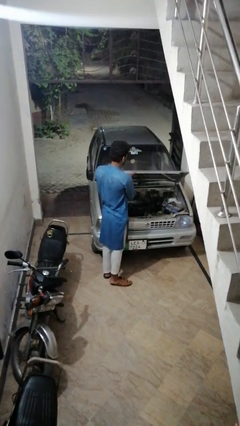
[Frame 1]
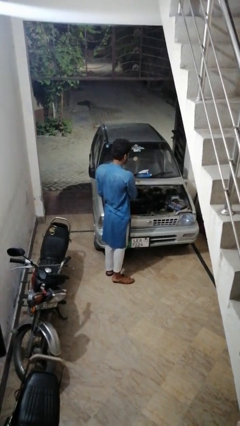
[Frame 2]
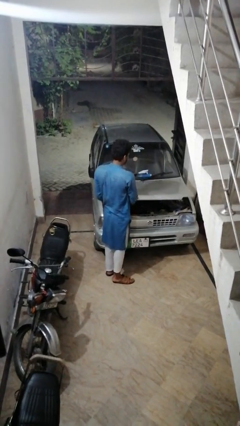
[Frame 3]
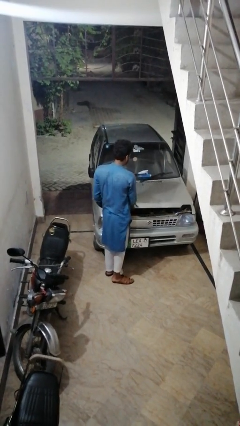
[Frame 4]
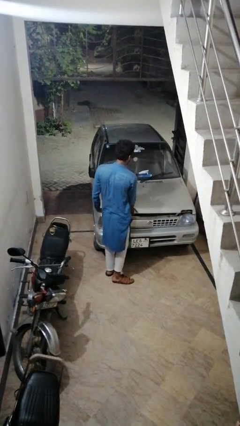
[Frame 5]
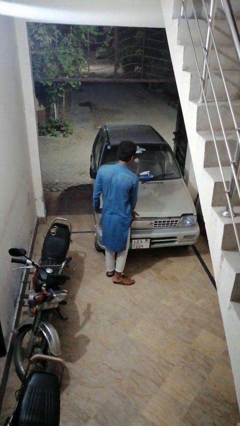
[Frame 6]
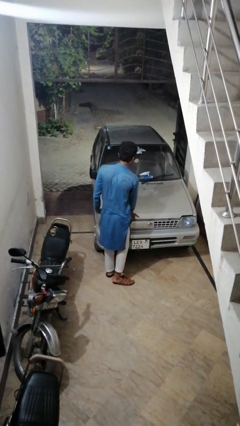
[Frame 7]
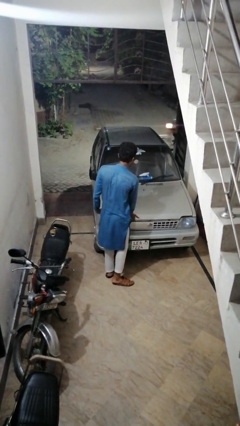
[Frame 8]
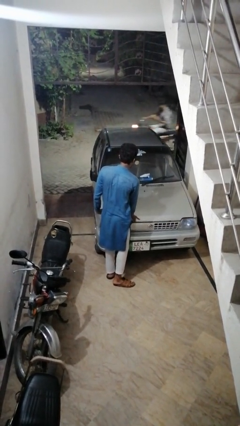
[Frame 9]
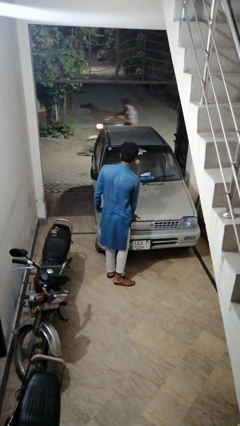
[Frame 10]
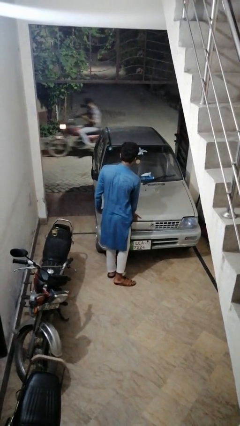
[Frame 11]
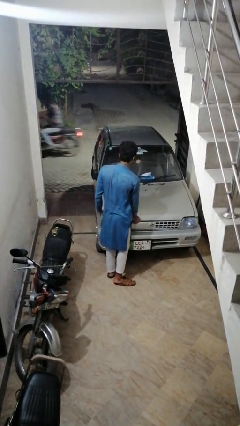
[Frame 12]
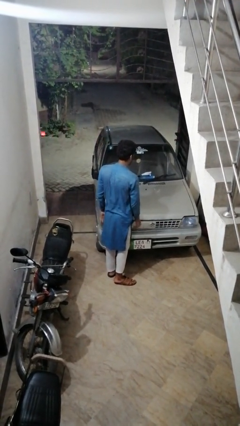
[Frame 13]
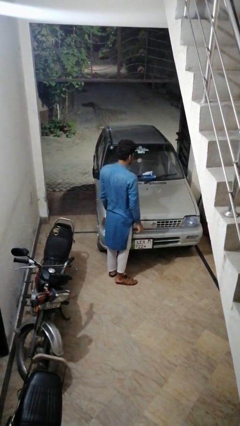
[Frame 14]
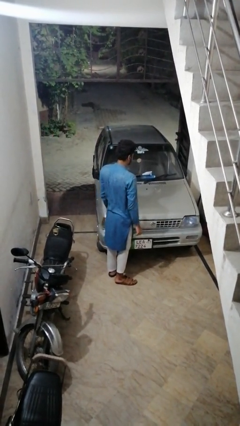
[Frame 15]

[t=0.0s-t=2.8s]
person closes car hood

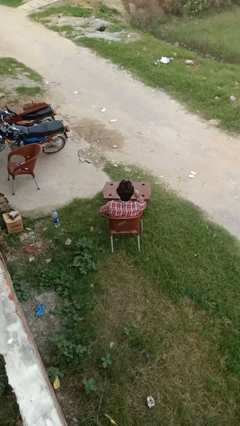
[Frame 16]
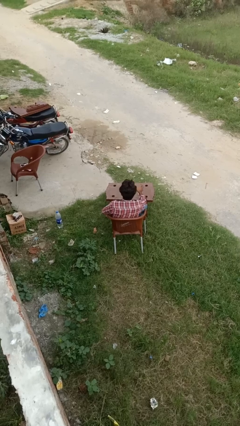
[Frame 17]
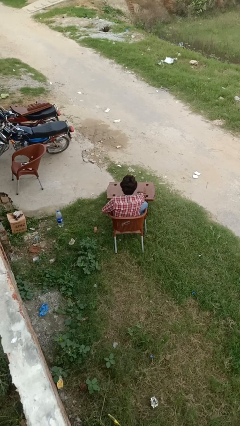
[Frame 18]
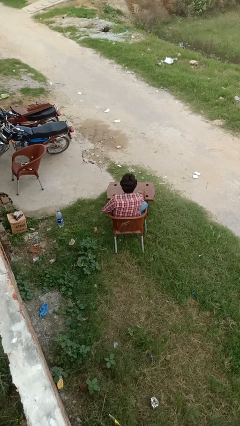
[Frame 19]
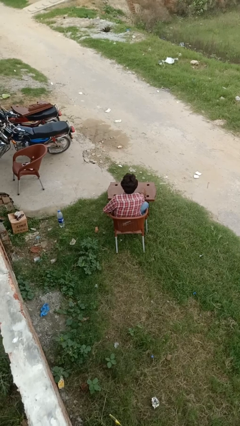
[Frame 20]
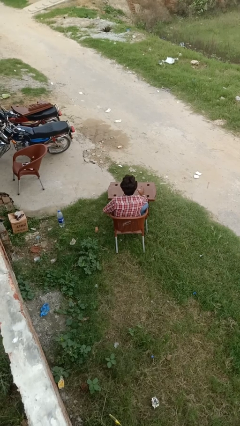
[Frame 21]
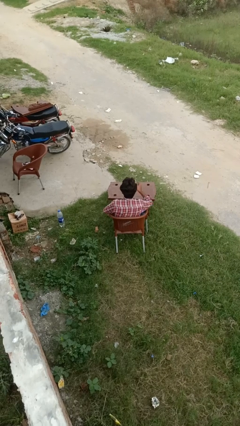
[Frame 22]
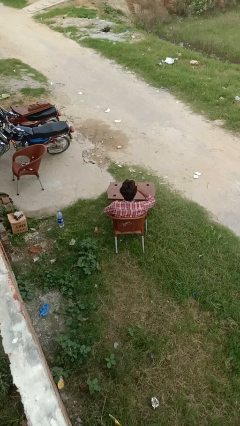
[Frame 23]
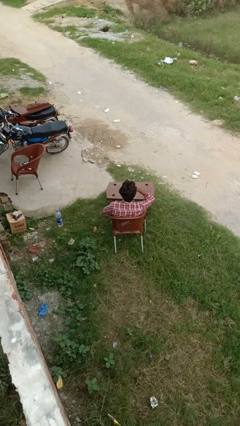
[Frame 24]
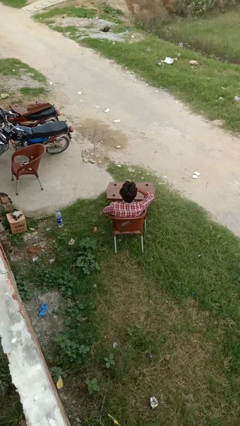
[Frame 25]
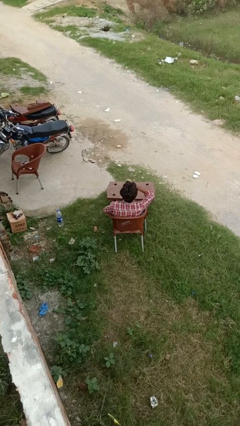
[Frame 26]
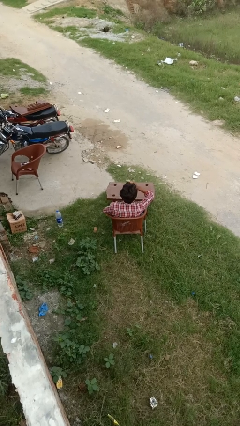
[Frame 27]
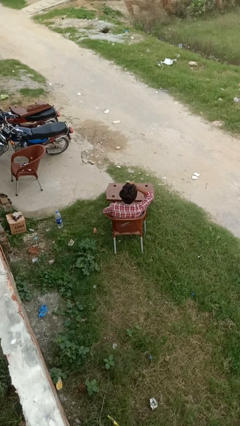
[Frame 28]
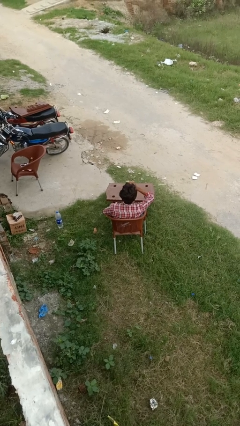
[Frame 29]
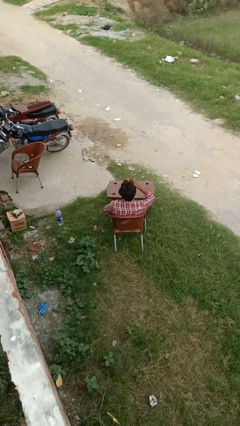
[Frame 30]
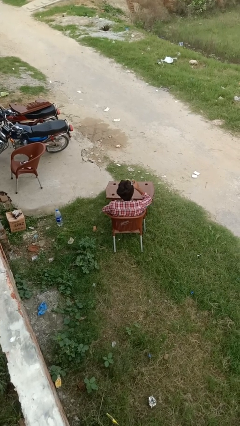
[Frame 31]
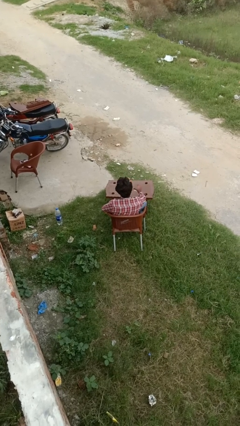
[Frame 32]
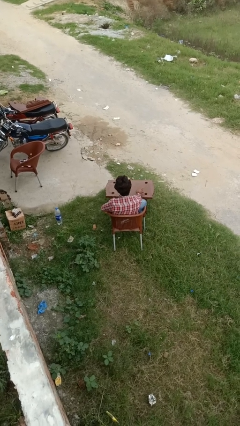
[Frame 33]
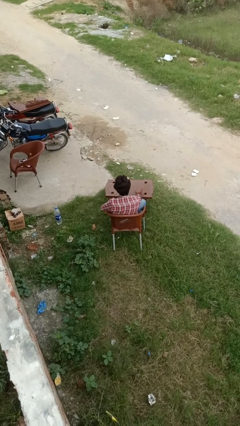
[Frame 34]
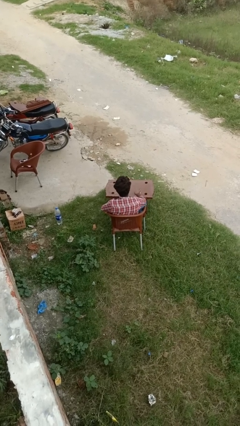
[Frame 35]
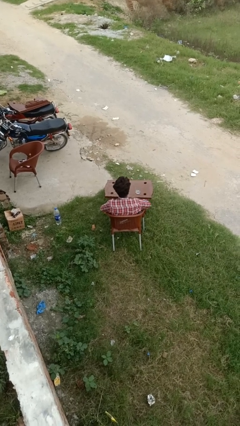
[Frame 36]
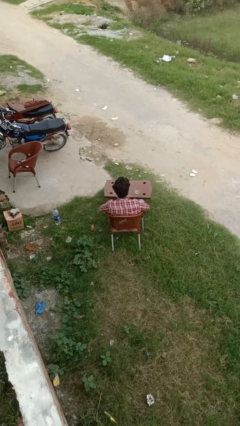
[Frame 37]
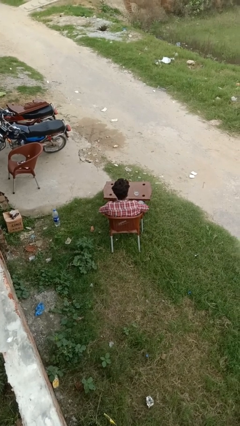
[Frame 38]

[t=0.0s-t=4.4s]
person drinks from cup

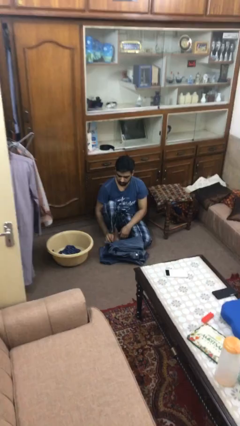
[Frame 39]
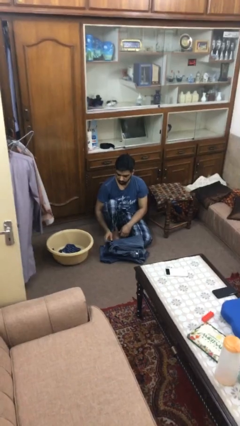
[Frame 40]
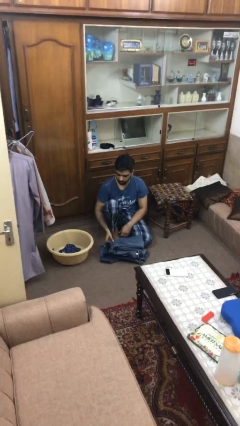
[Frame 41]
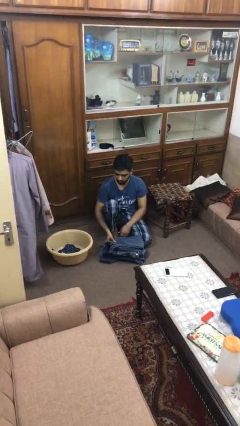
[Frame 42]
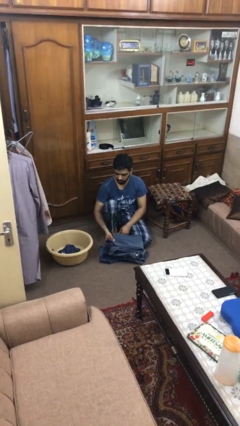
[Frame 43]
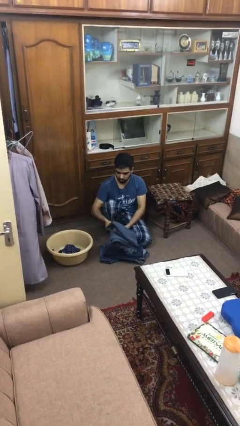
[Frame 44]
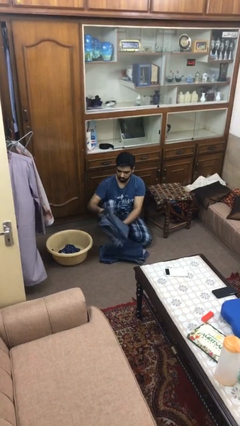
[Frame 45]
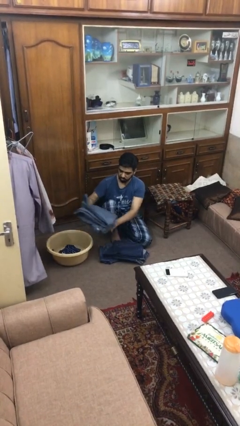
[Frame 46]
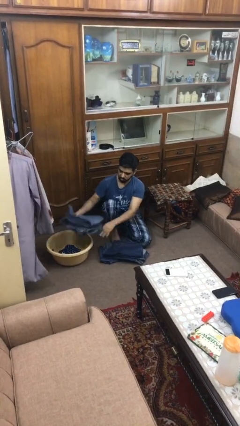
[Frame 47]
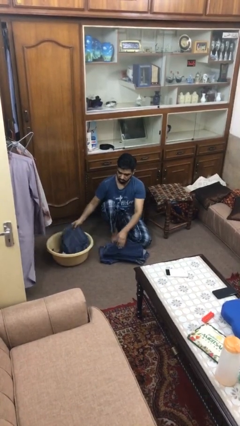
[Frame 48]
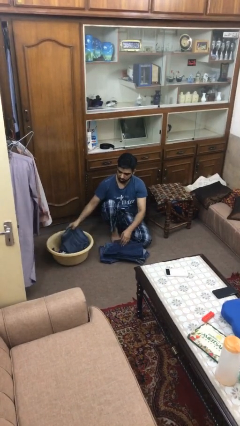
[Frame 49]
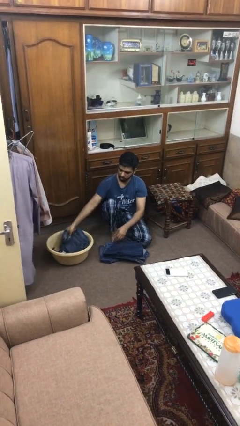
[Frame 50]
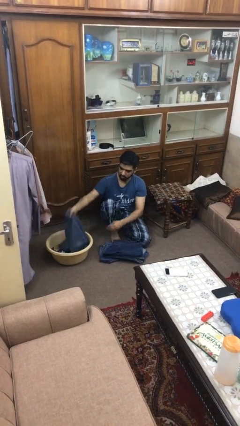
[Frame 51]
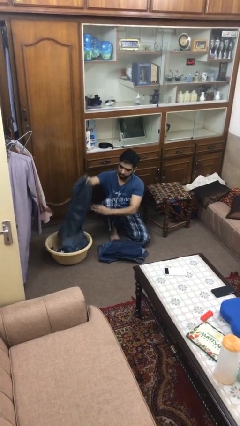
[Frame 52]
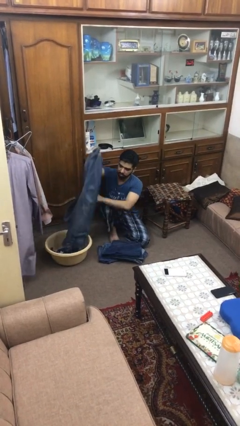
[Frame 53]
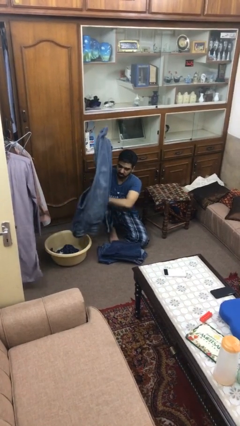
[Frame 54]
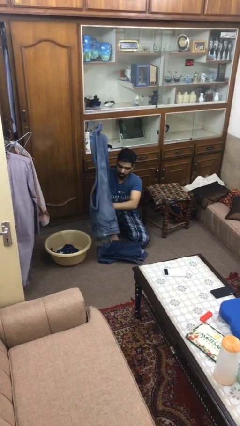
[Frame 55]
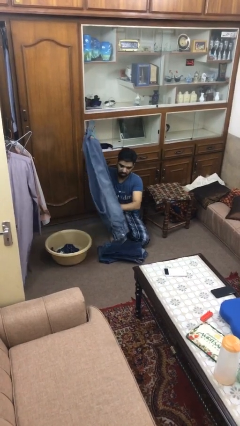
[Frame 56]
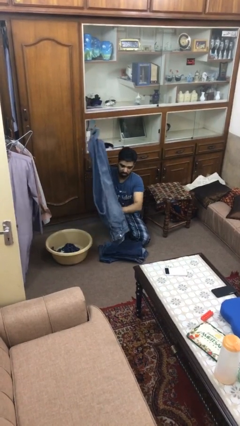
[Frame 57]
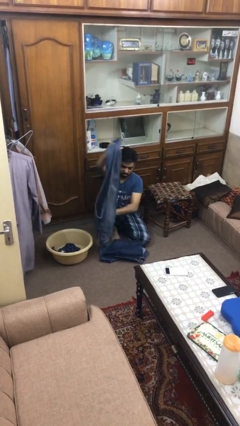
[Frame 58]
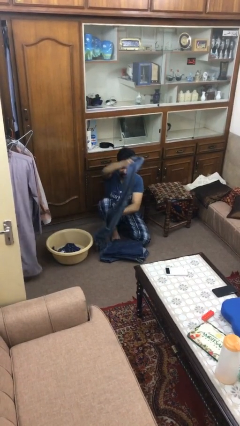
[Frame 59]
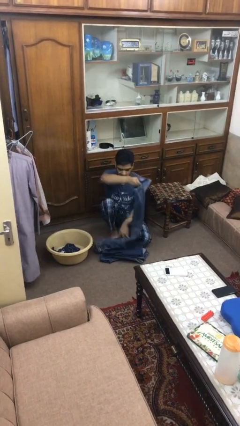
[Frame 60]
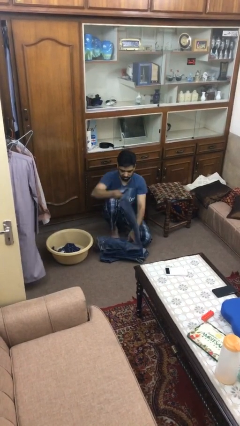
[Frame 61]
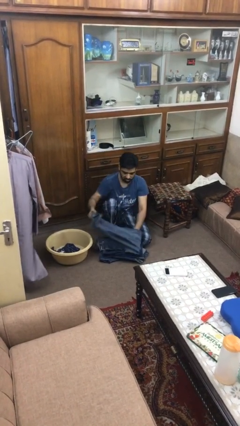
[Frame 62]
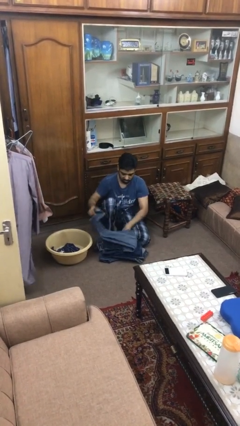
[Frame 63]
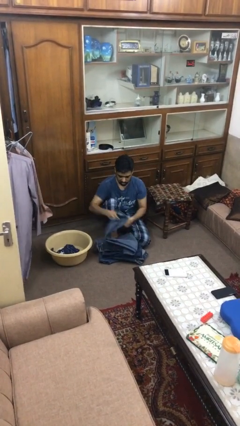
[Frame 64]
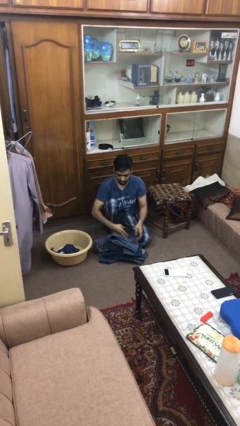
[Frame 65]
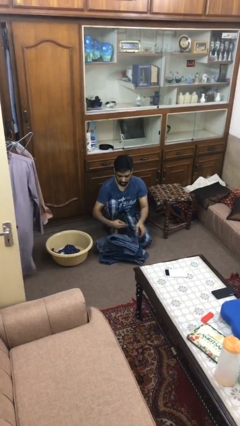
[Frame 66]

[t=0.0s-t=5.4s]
person folds pants

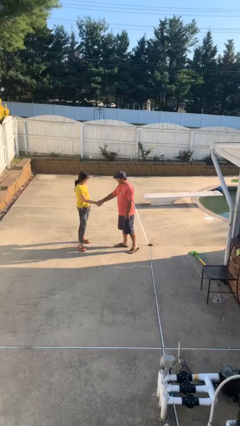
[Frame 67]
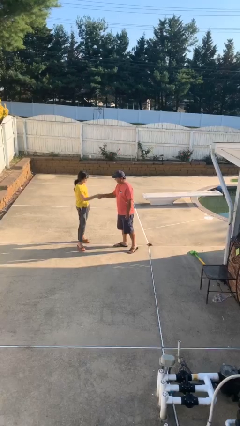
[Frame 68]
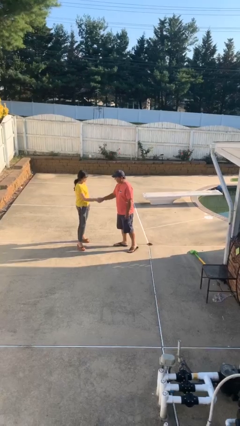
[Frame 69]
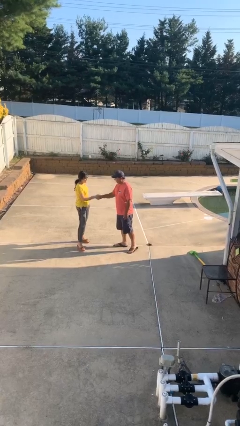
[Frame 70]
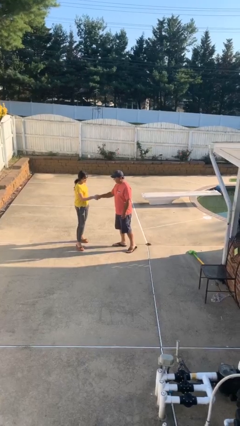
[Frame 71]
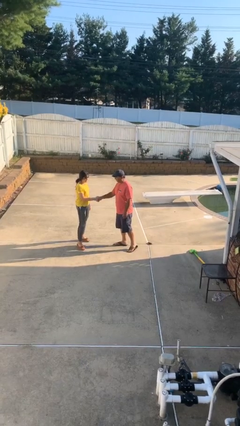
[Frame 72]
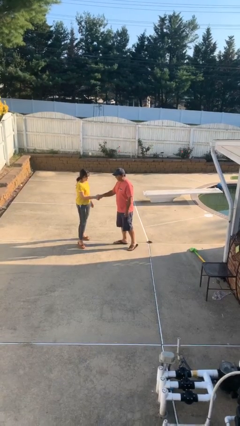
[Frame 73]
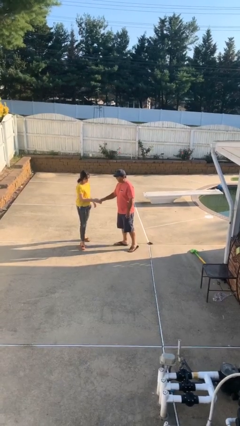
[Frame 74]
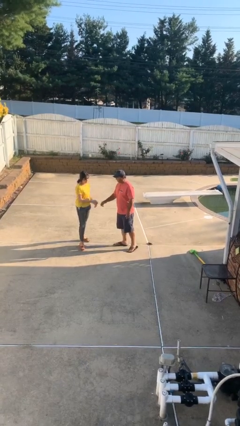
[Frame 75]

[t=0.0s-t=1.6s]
person shakes hand

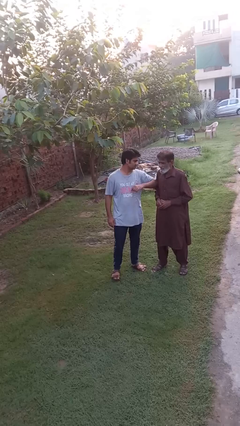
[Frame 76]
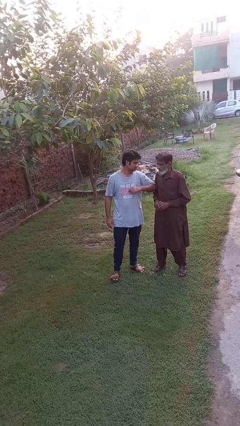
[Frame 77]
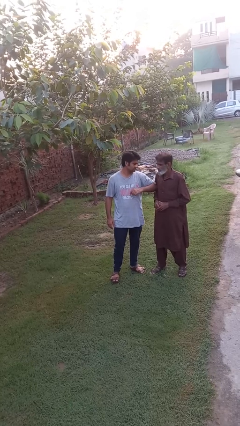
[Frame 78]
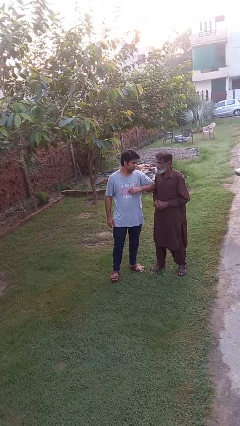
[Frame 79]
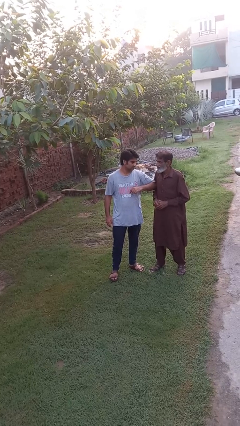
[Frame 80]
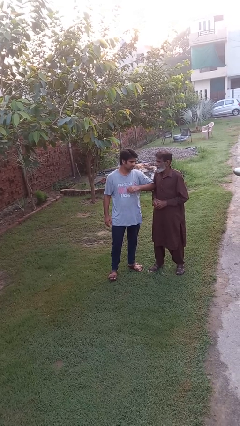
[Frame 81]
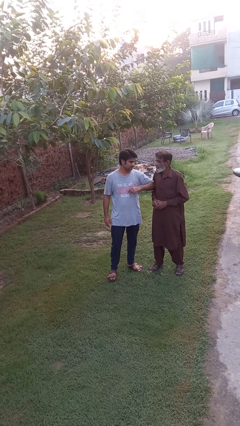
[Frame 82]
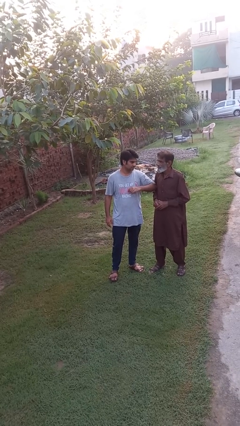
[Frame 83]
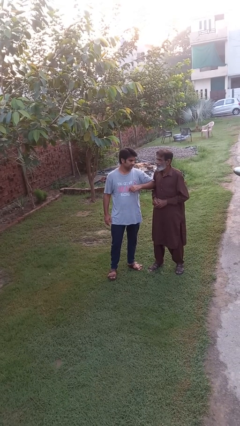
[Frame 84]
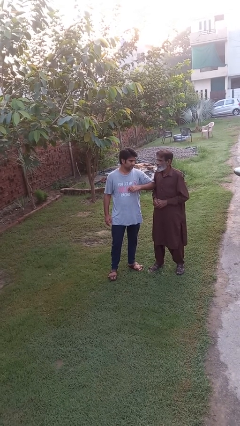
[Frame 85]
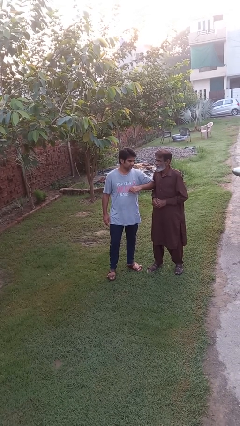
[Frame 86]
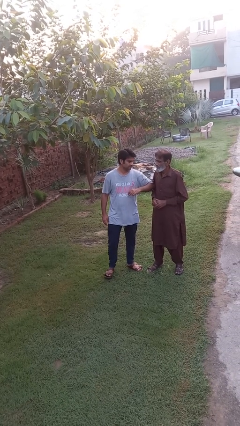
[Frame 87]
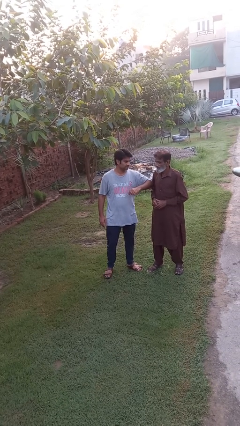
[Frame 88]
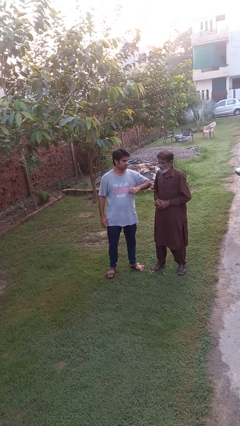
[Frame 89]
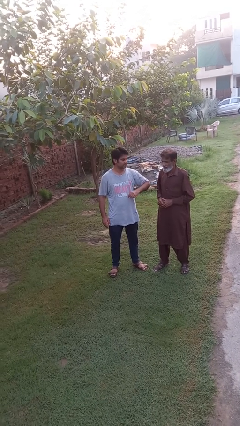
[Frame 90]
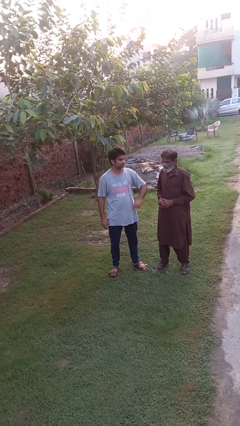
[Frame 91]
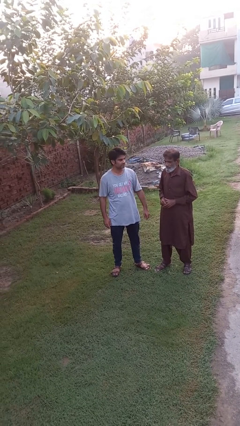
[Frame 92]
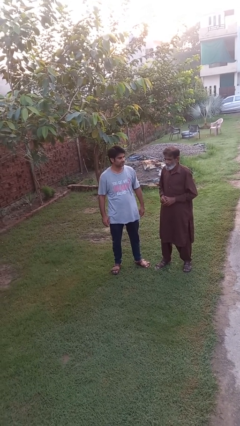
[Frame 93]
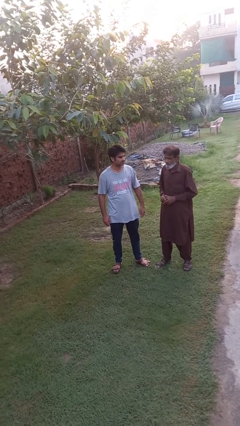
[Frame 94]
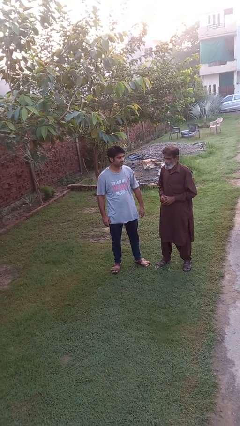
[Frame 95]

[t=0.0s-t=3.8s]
person nudges person with elbow
